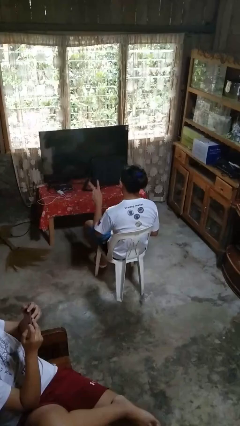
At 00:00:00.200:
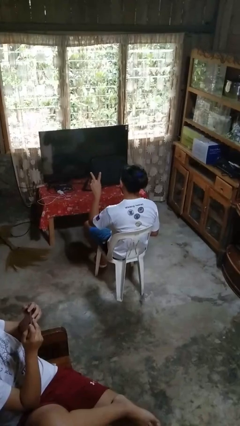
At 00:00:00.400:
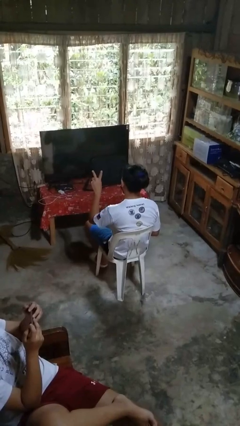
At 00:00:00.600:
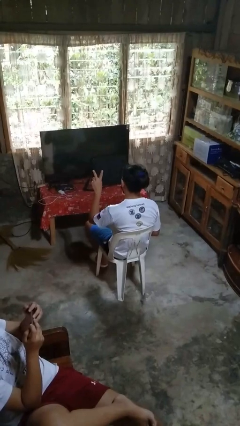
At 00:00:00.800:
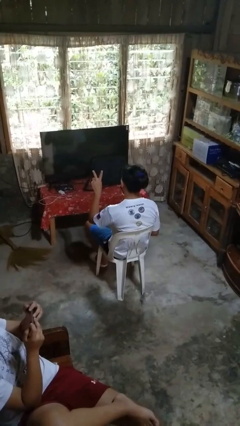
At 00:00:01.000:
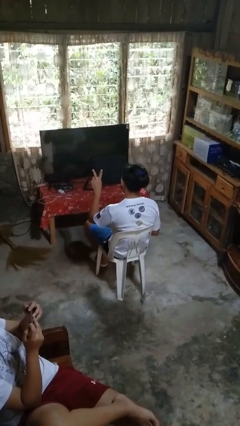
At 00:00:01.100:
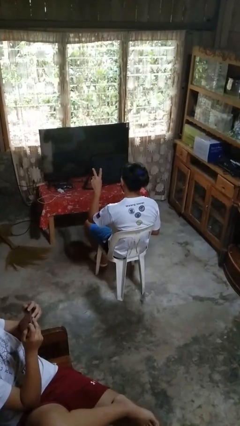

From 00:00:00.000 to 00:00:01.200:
person gestures peace

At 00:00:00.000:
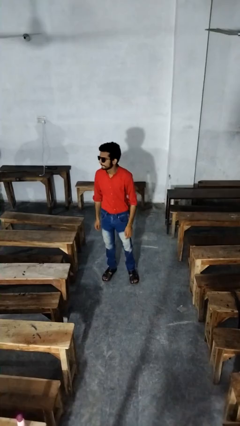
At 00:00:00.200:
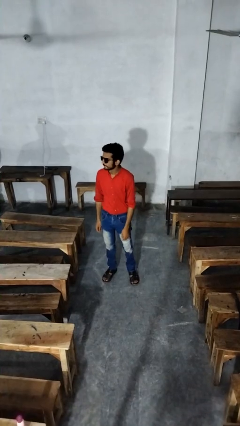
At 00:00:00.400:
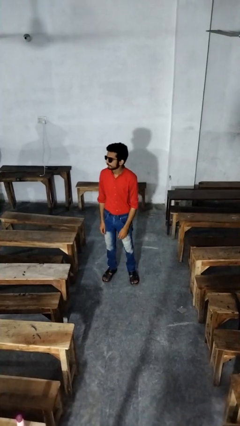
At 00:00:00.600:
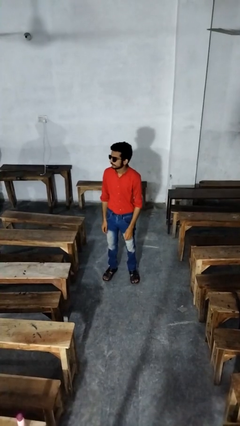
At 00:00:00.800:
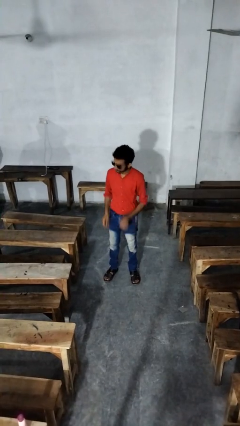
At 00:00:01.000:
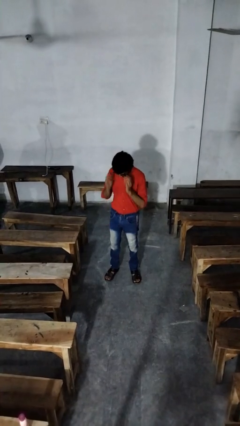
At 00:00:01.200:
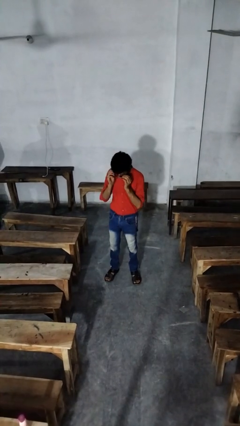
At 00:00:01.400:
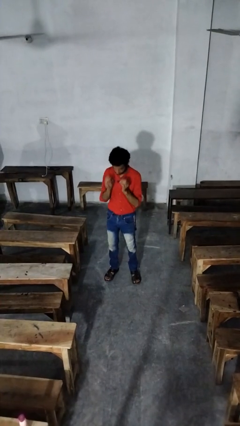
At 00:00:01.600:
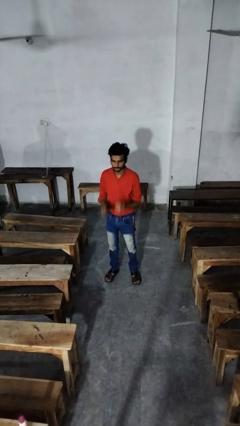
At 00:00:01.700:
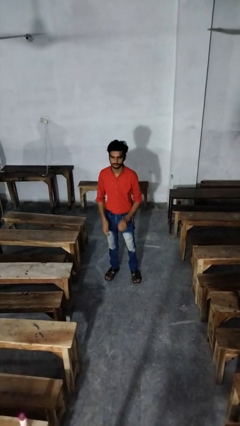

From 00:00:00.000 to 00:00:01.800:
person takes off sunglasses

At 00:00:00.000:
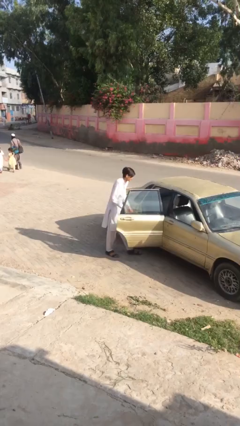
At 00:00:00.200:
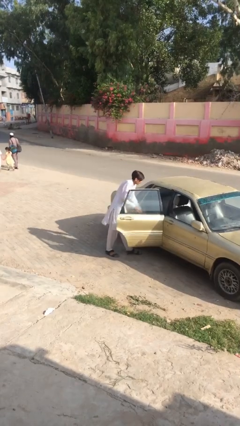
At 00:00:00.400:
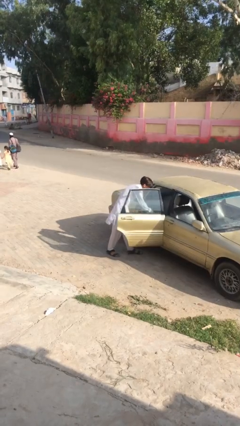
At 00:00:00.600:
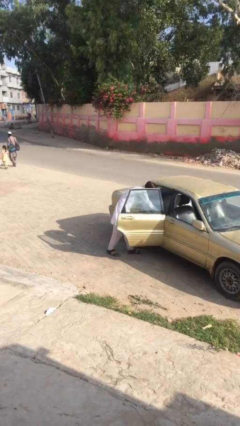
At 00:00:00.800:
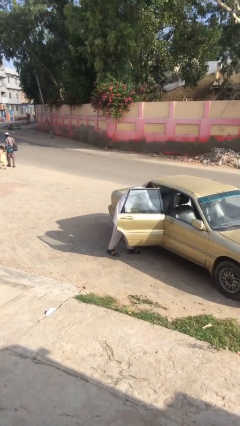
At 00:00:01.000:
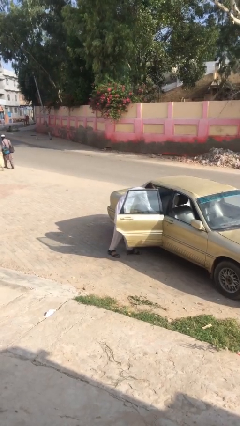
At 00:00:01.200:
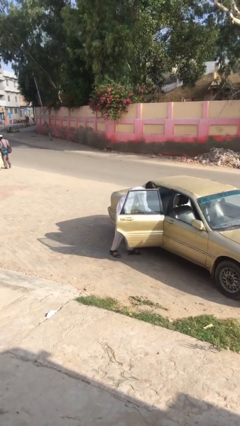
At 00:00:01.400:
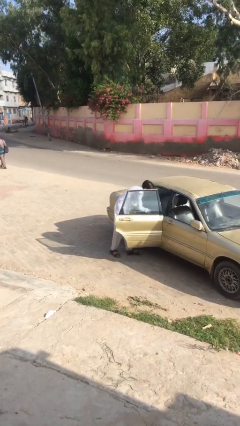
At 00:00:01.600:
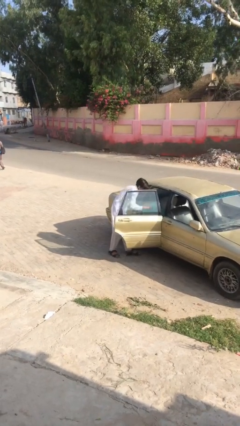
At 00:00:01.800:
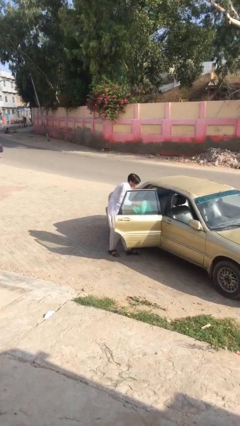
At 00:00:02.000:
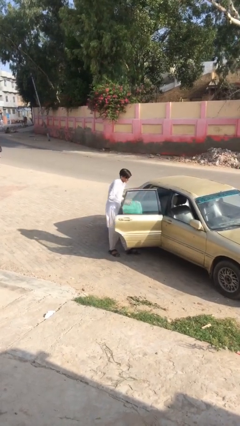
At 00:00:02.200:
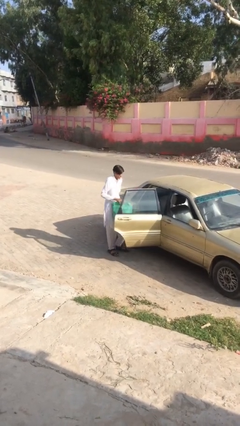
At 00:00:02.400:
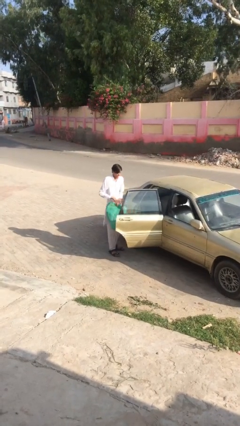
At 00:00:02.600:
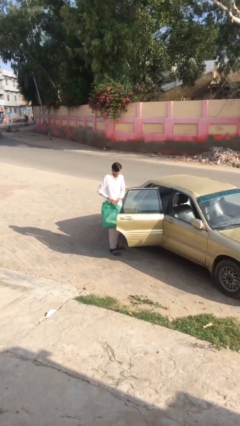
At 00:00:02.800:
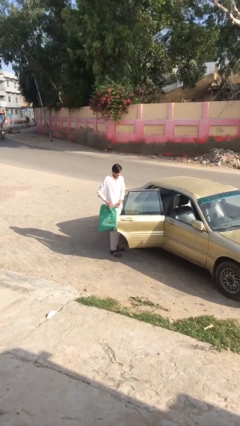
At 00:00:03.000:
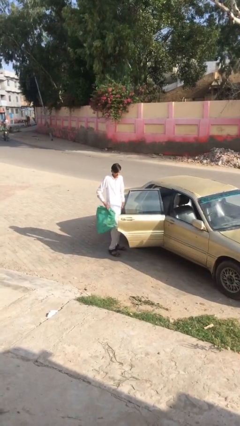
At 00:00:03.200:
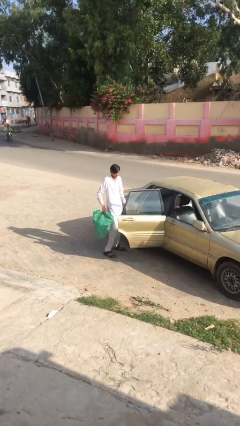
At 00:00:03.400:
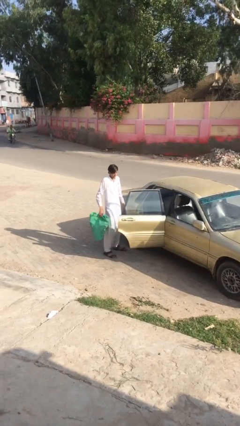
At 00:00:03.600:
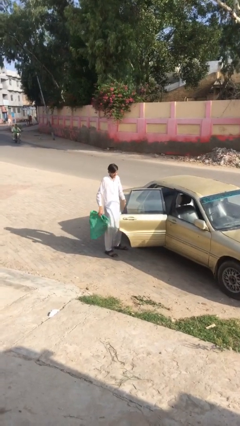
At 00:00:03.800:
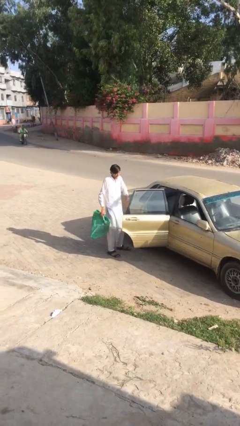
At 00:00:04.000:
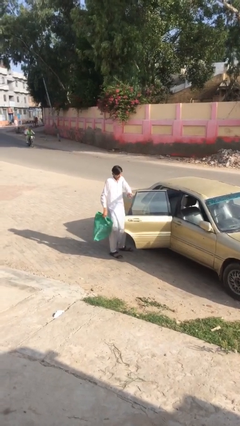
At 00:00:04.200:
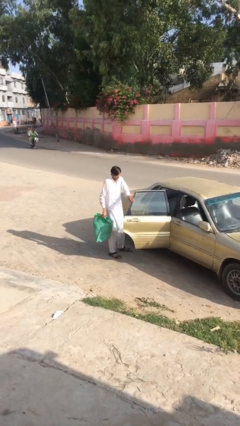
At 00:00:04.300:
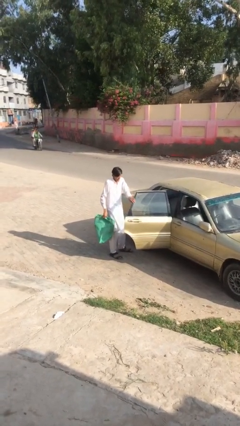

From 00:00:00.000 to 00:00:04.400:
person unloads car

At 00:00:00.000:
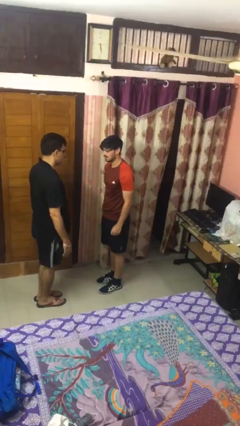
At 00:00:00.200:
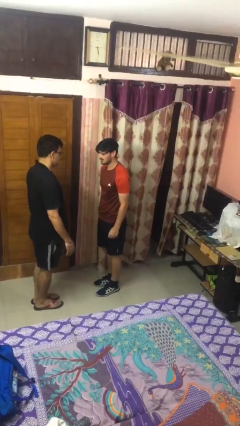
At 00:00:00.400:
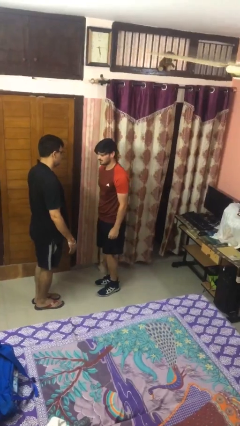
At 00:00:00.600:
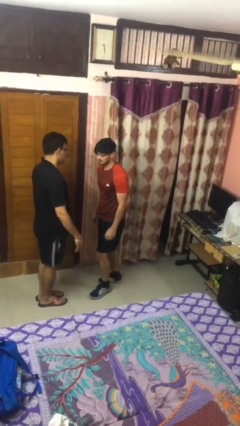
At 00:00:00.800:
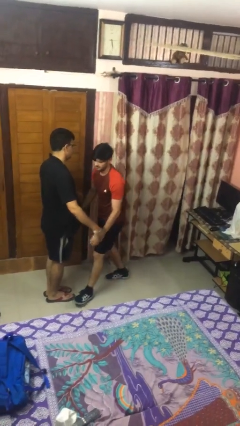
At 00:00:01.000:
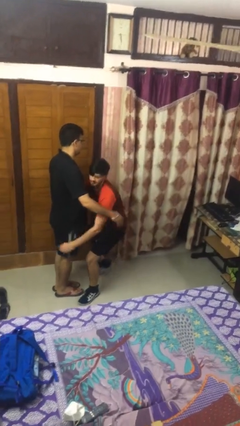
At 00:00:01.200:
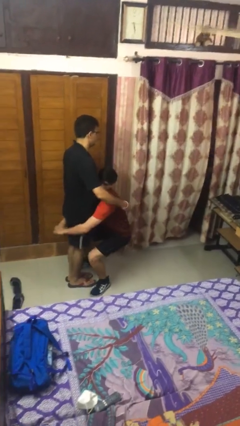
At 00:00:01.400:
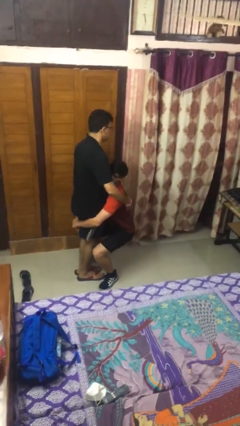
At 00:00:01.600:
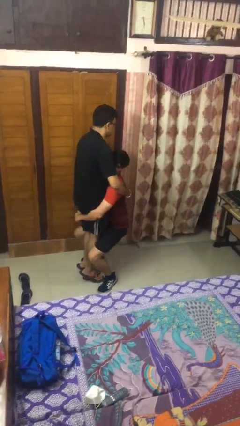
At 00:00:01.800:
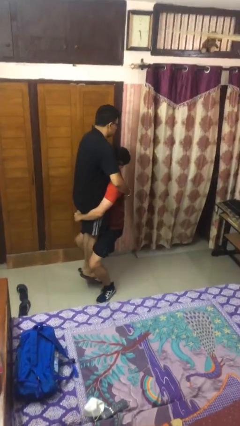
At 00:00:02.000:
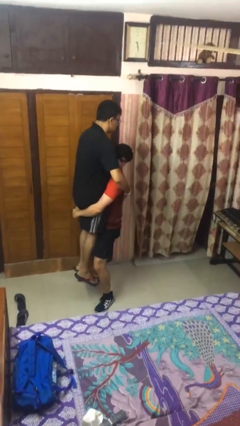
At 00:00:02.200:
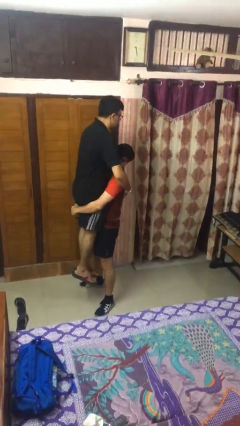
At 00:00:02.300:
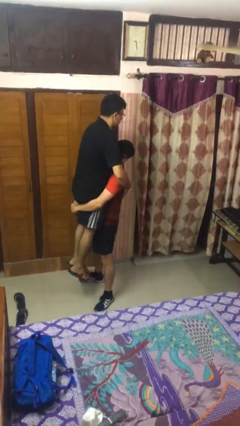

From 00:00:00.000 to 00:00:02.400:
person picks up person

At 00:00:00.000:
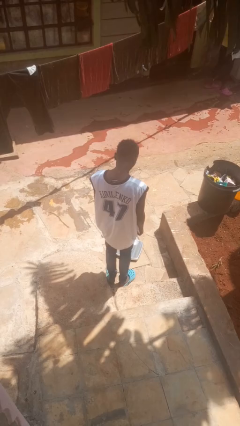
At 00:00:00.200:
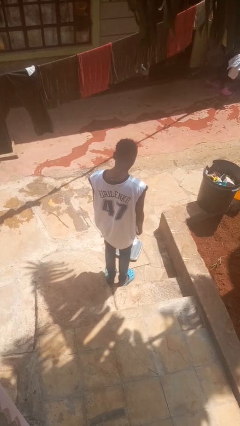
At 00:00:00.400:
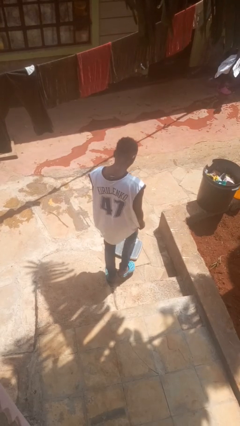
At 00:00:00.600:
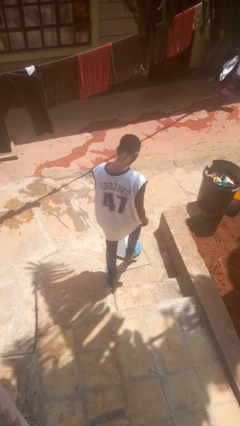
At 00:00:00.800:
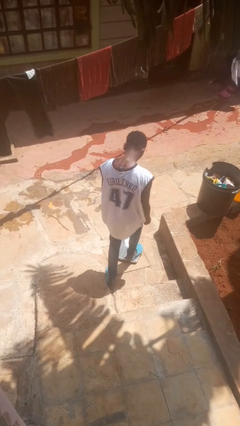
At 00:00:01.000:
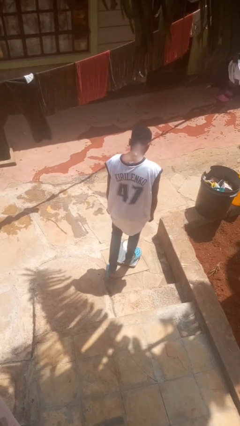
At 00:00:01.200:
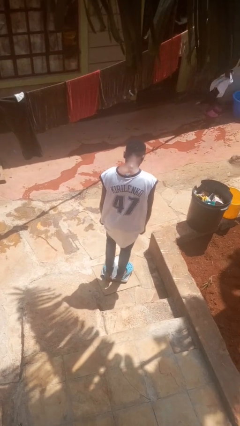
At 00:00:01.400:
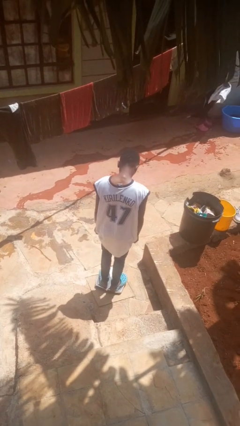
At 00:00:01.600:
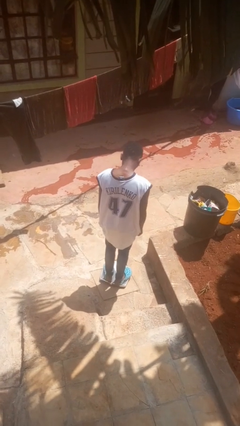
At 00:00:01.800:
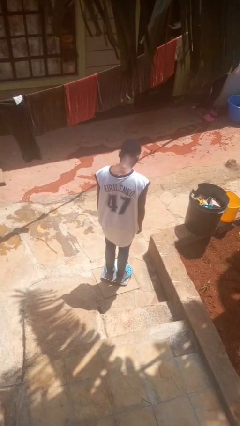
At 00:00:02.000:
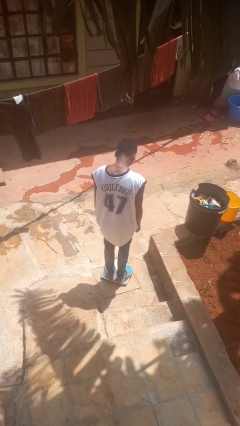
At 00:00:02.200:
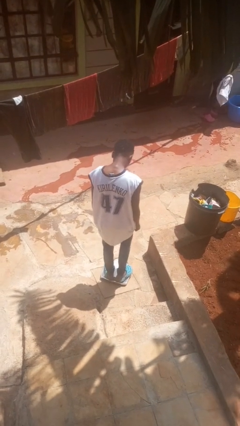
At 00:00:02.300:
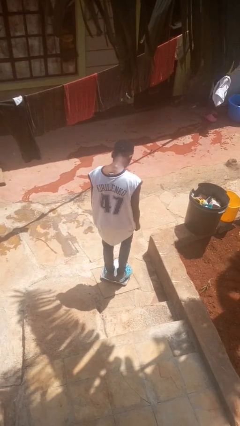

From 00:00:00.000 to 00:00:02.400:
person uses bodyweight scale

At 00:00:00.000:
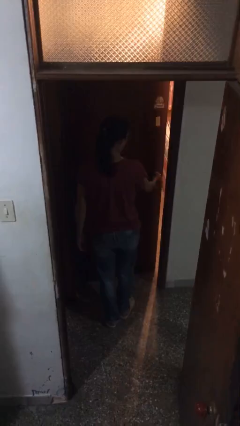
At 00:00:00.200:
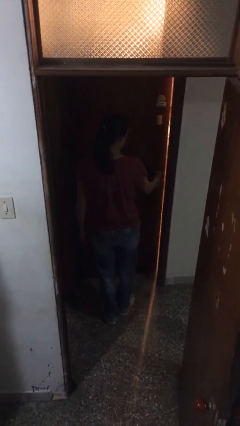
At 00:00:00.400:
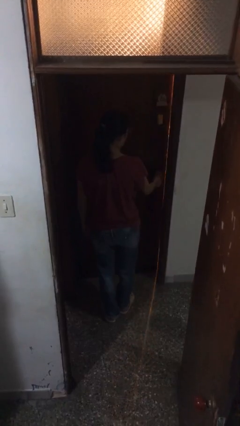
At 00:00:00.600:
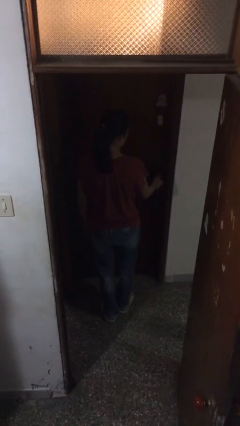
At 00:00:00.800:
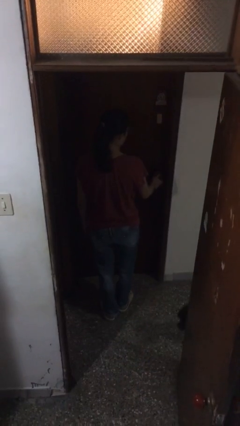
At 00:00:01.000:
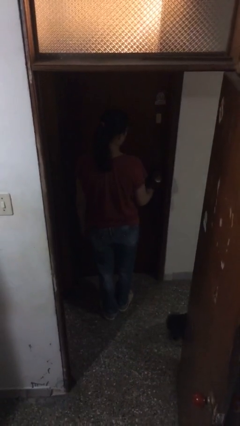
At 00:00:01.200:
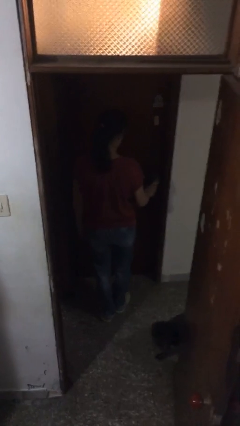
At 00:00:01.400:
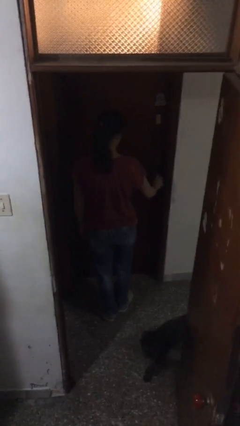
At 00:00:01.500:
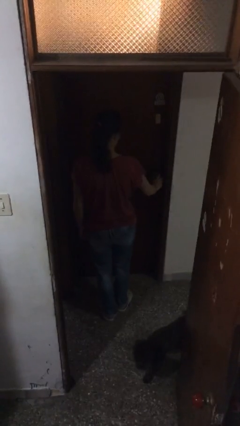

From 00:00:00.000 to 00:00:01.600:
person closes facility door

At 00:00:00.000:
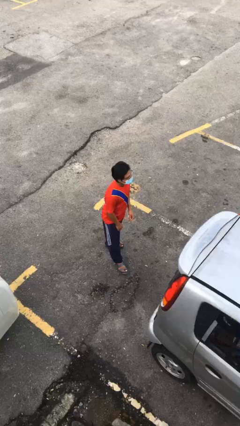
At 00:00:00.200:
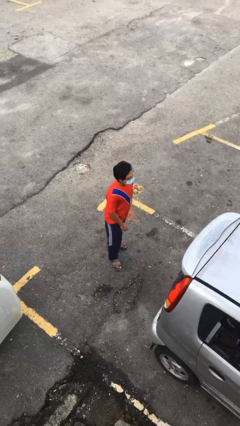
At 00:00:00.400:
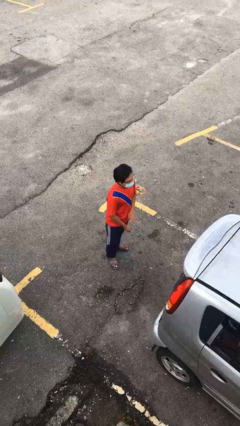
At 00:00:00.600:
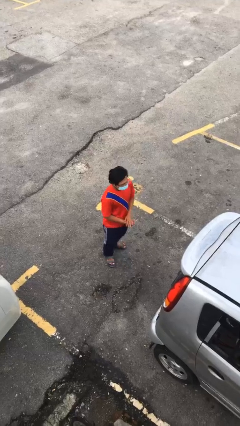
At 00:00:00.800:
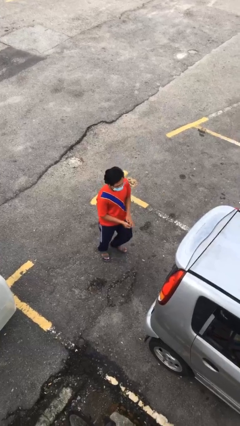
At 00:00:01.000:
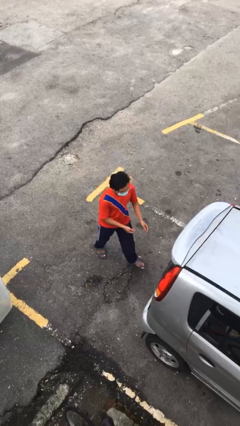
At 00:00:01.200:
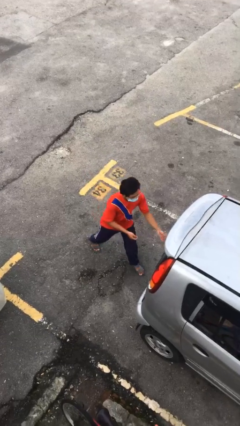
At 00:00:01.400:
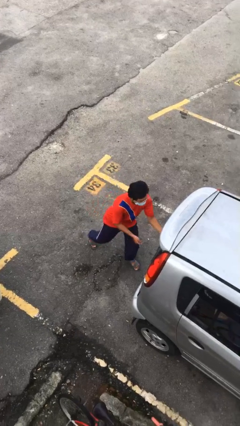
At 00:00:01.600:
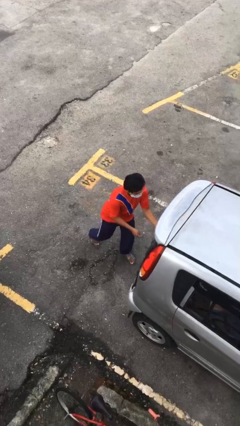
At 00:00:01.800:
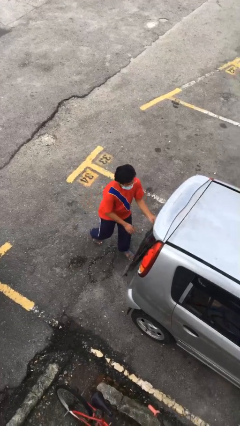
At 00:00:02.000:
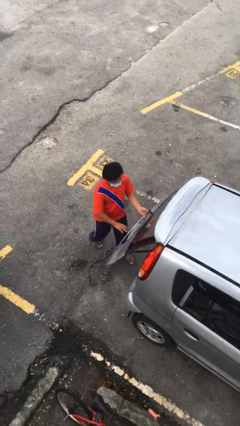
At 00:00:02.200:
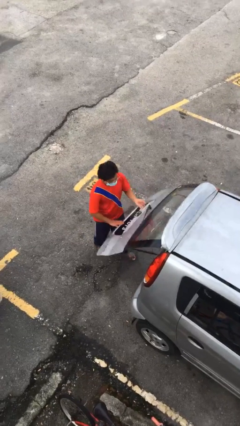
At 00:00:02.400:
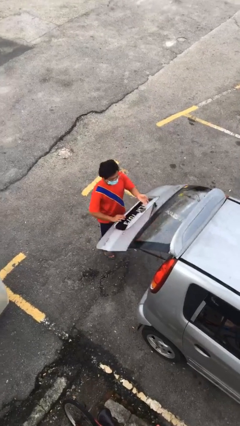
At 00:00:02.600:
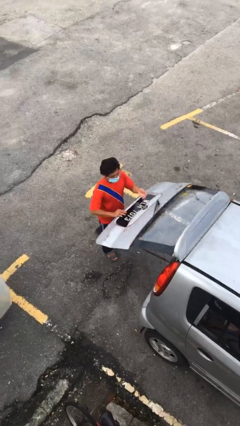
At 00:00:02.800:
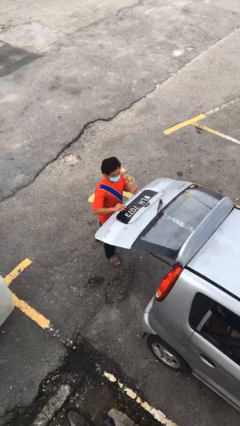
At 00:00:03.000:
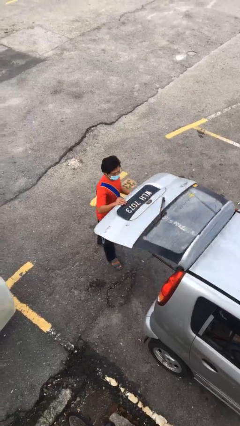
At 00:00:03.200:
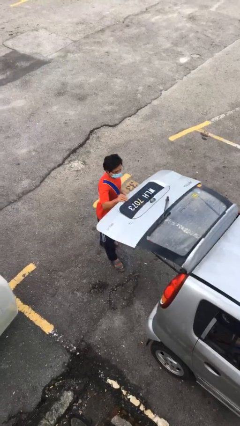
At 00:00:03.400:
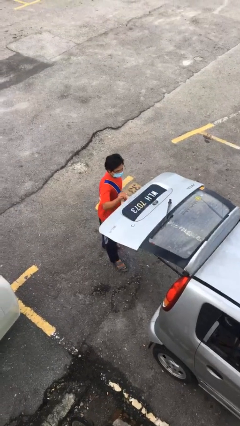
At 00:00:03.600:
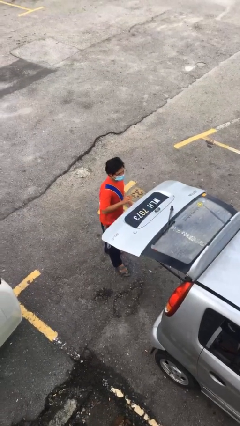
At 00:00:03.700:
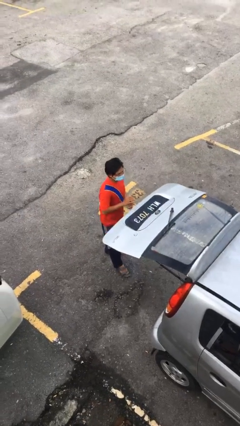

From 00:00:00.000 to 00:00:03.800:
person opens car trunk
